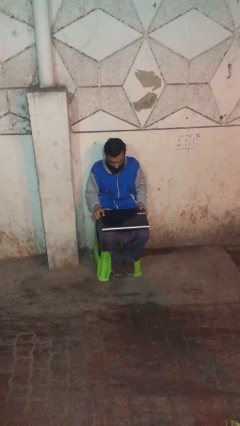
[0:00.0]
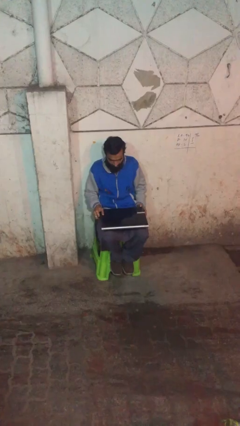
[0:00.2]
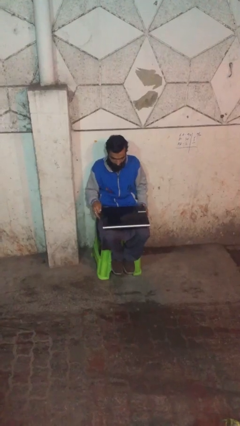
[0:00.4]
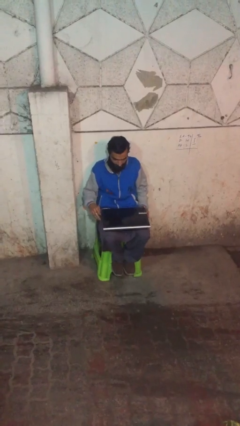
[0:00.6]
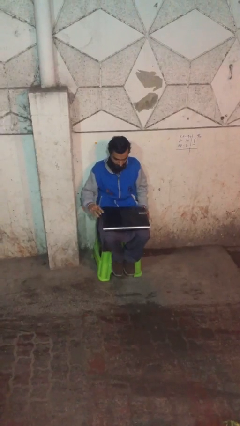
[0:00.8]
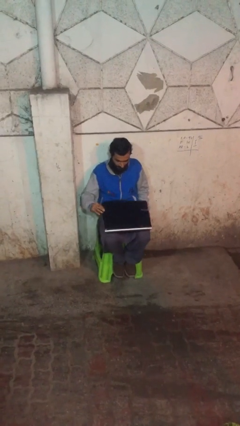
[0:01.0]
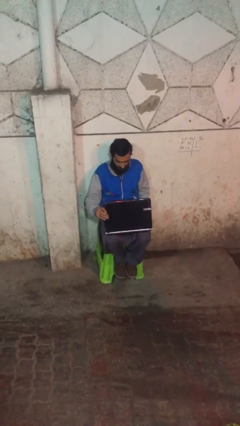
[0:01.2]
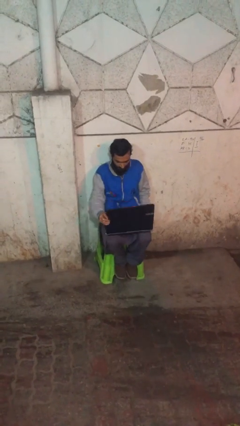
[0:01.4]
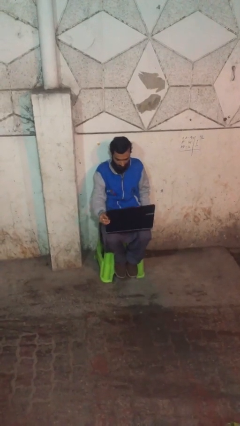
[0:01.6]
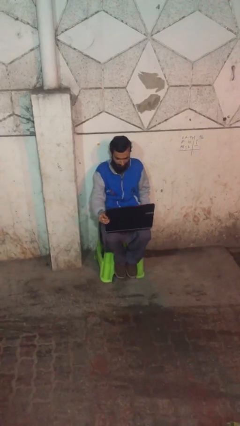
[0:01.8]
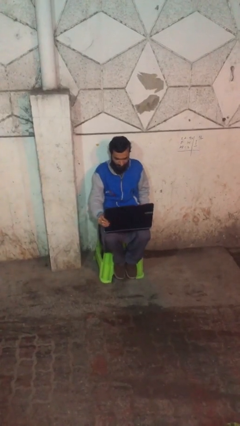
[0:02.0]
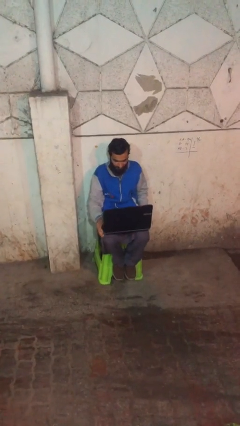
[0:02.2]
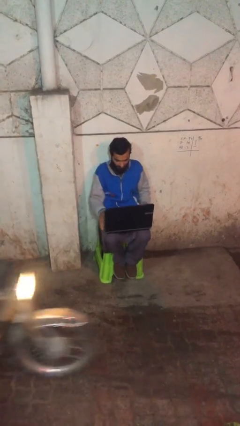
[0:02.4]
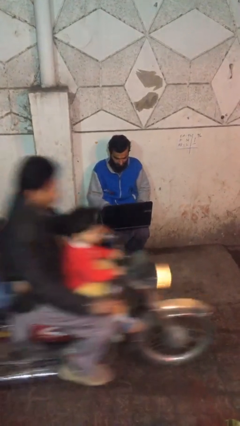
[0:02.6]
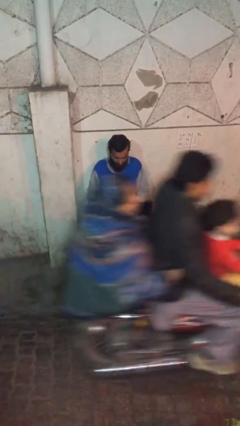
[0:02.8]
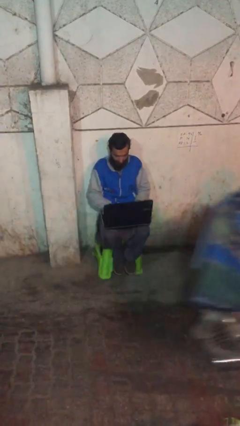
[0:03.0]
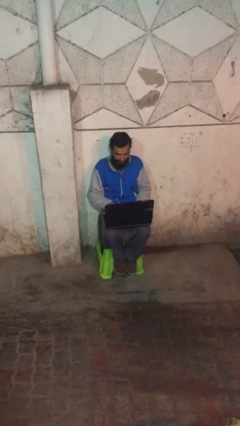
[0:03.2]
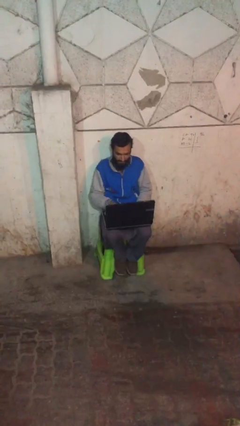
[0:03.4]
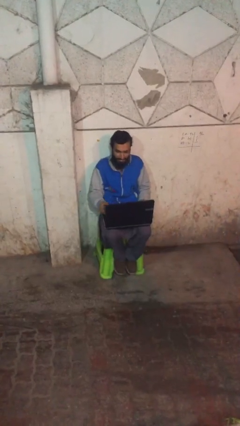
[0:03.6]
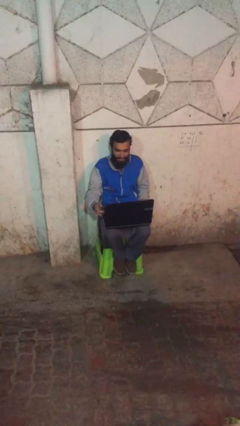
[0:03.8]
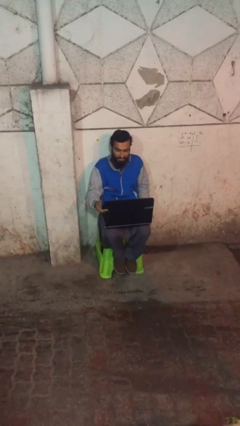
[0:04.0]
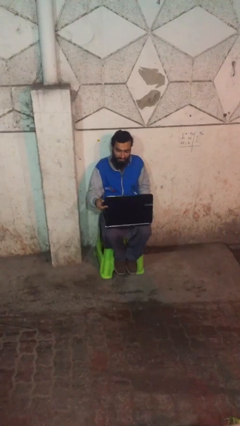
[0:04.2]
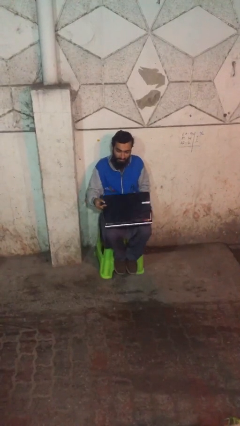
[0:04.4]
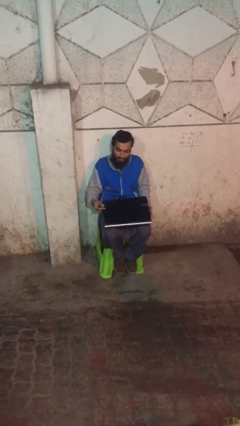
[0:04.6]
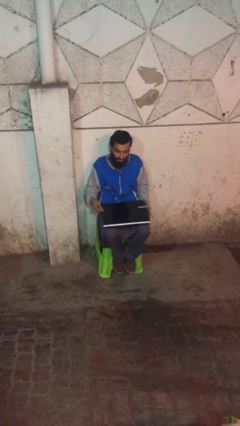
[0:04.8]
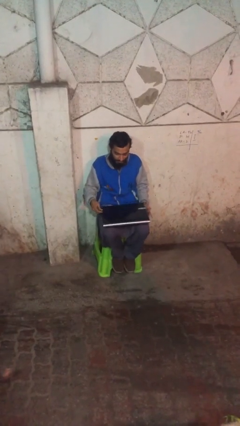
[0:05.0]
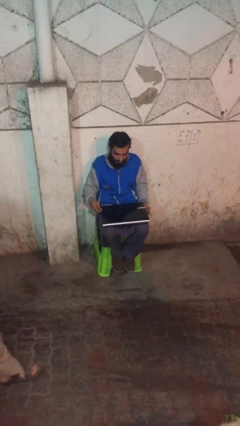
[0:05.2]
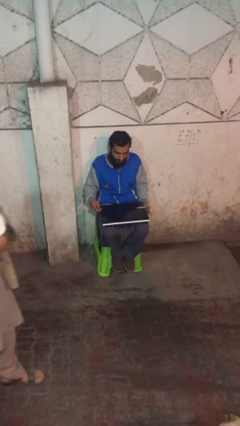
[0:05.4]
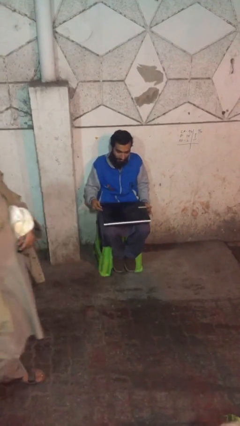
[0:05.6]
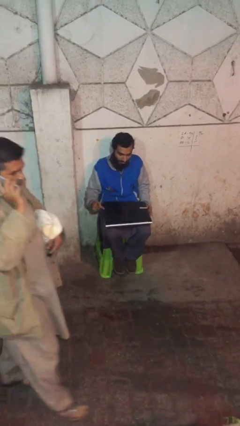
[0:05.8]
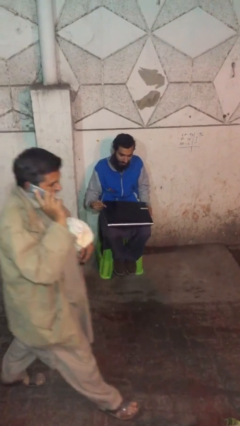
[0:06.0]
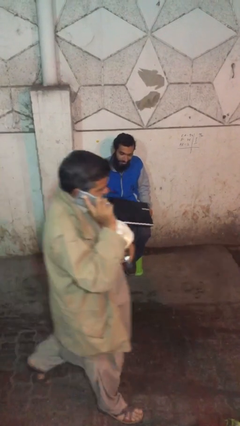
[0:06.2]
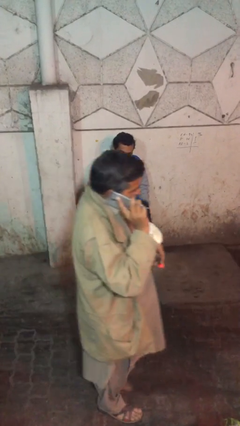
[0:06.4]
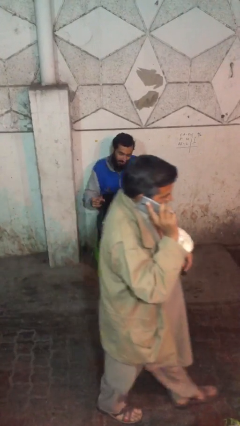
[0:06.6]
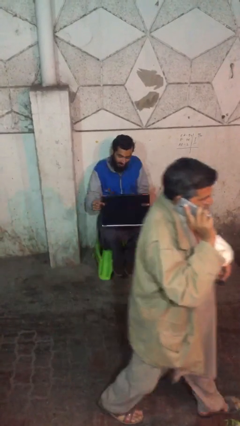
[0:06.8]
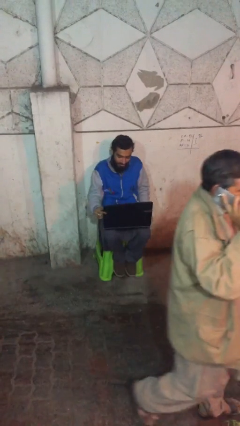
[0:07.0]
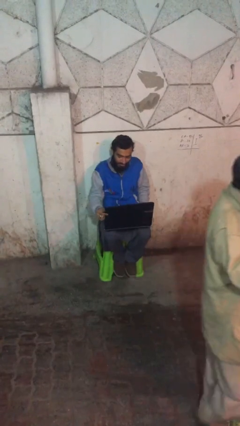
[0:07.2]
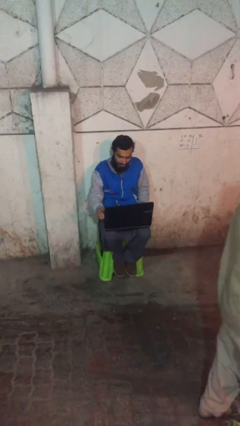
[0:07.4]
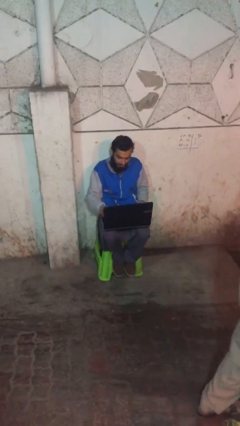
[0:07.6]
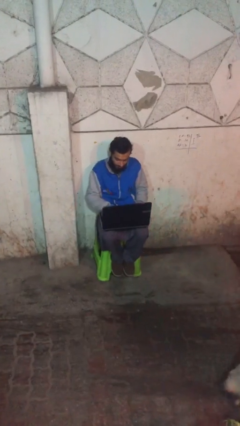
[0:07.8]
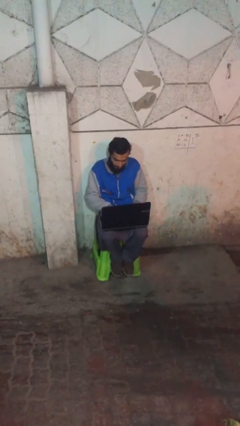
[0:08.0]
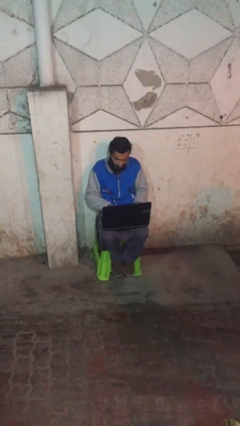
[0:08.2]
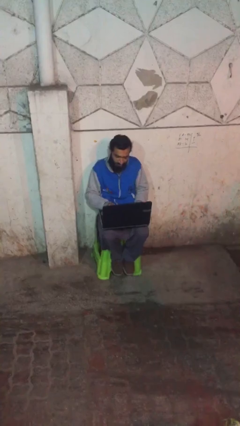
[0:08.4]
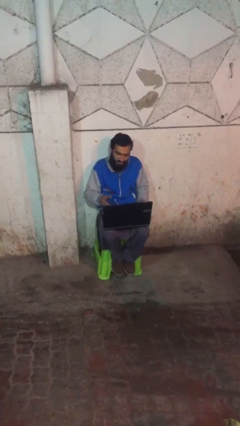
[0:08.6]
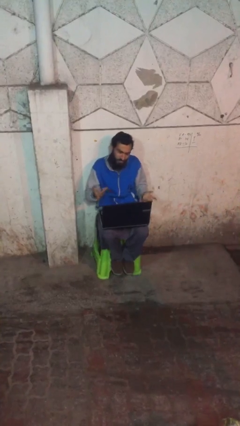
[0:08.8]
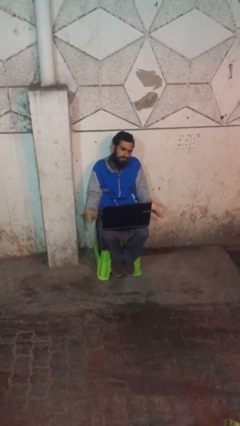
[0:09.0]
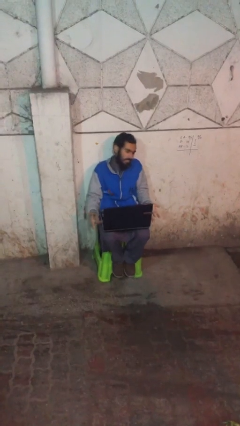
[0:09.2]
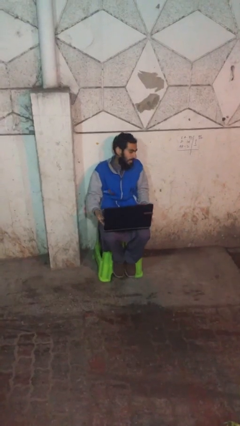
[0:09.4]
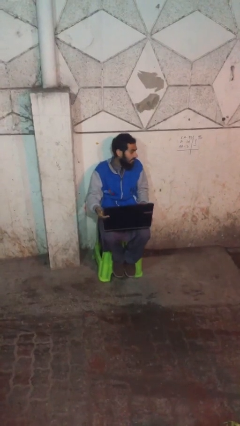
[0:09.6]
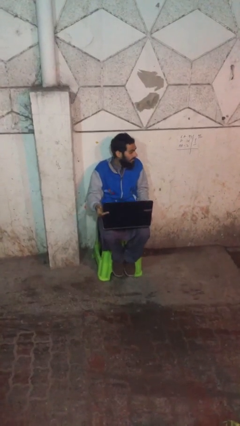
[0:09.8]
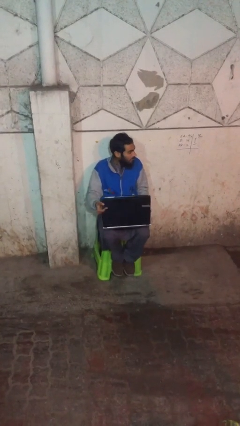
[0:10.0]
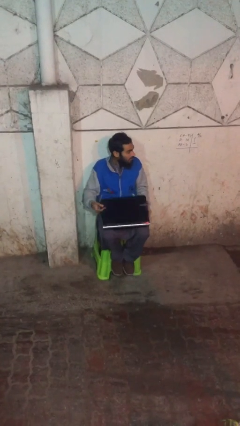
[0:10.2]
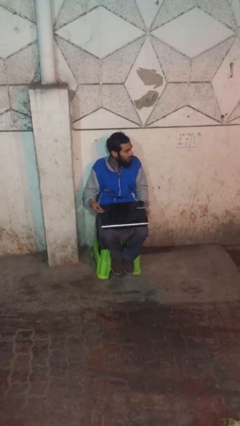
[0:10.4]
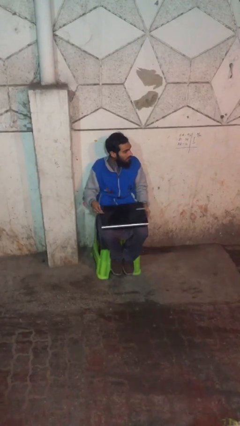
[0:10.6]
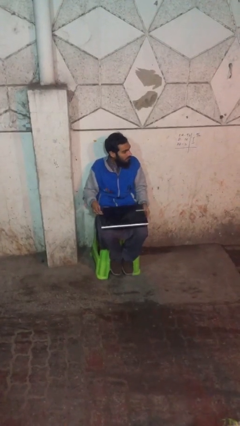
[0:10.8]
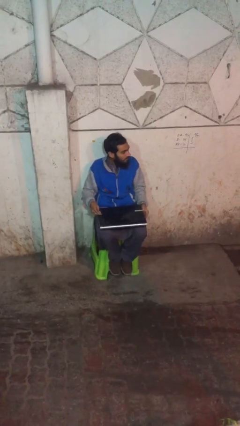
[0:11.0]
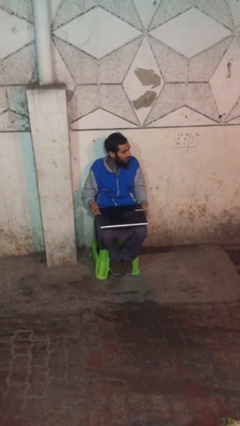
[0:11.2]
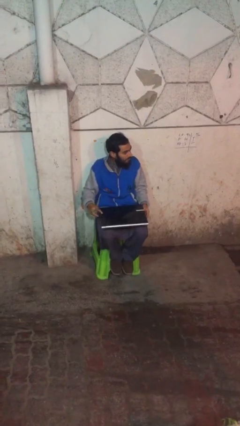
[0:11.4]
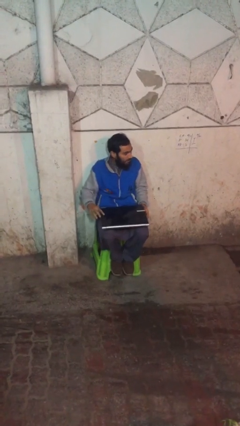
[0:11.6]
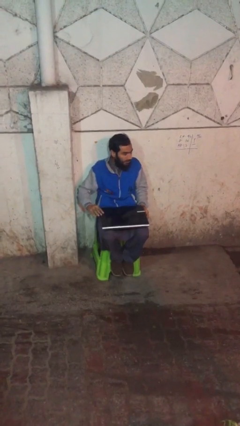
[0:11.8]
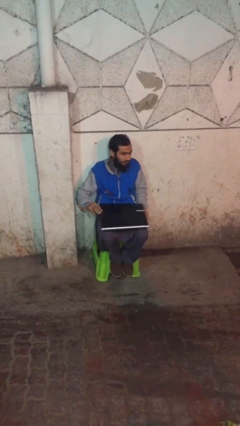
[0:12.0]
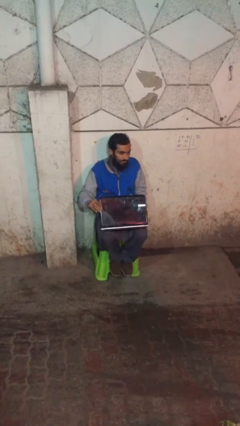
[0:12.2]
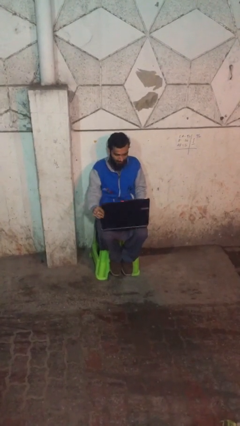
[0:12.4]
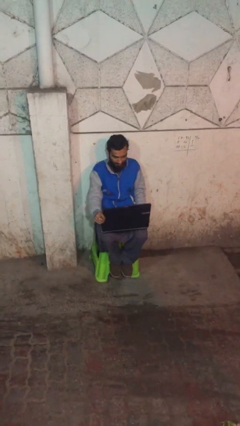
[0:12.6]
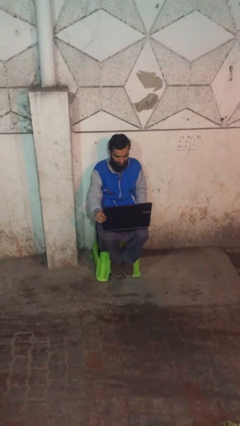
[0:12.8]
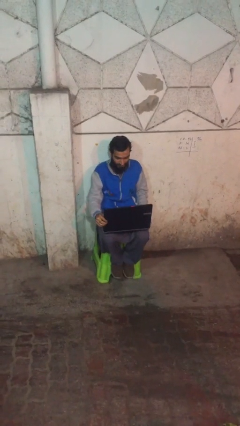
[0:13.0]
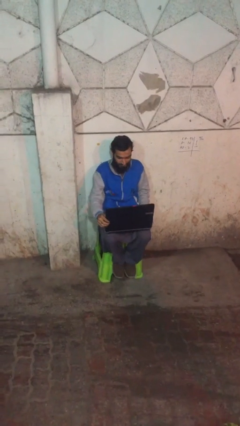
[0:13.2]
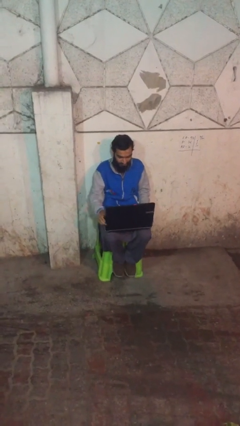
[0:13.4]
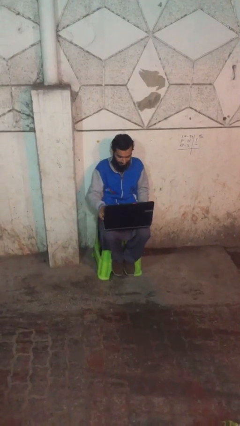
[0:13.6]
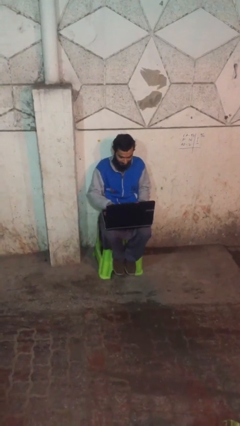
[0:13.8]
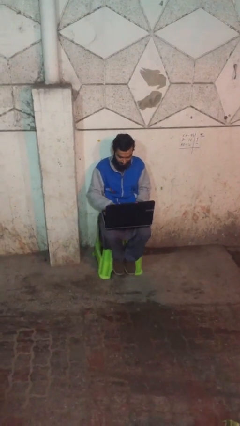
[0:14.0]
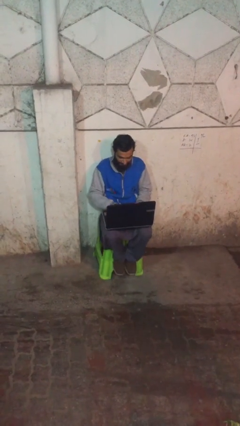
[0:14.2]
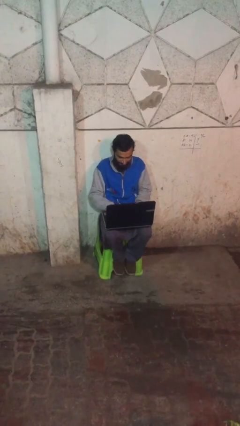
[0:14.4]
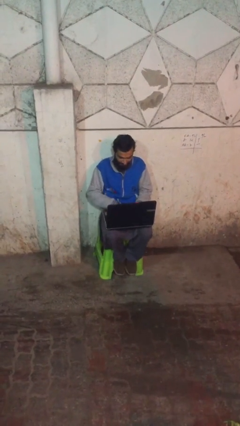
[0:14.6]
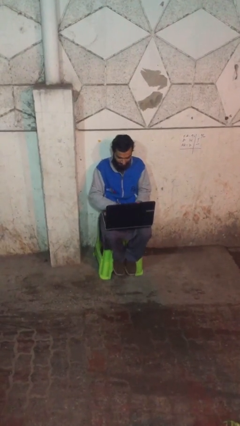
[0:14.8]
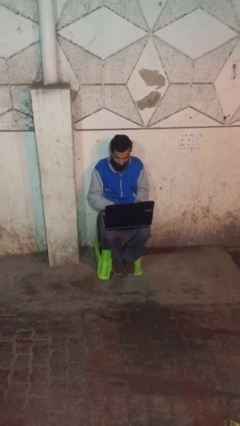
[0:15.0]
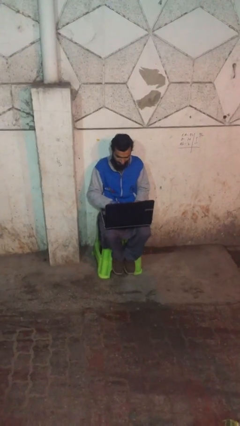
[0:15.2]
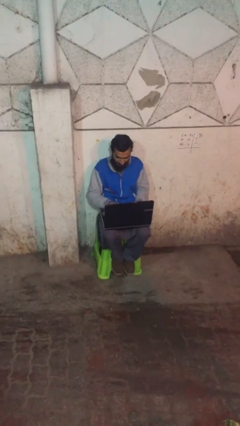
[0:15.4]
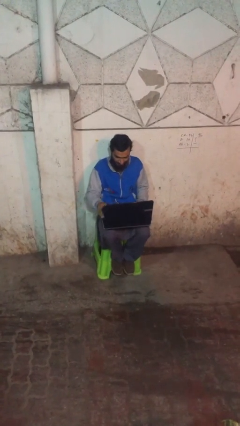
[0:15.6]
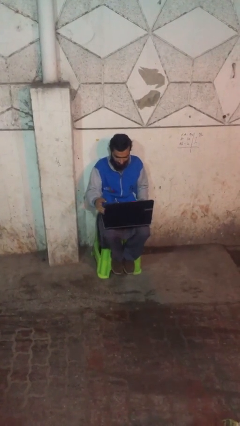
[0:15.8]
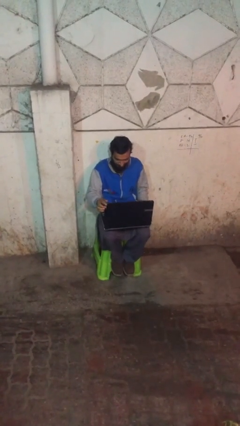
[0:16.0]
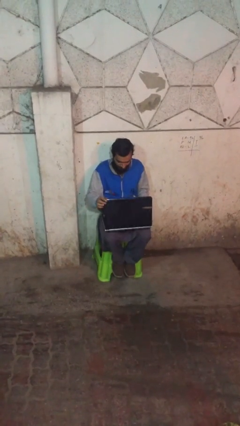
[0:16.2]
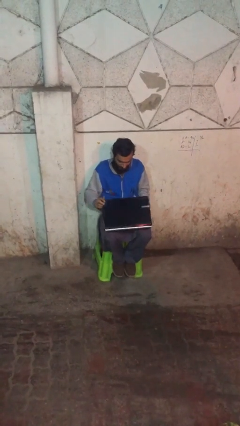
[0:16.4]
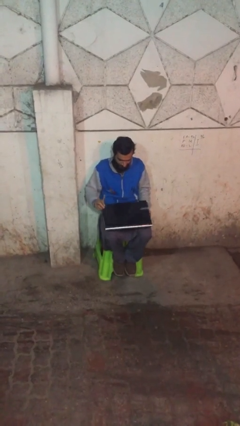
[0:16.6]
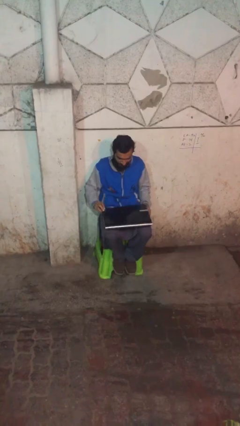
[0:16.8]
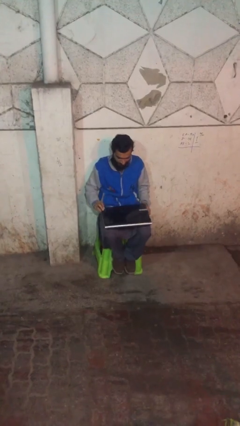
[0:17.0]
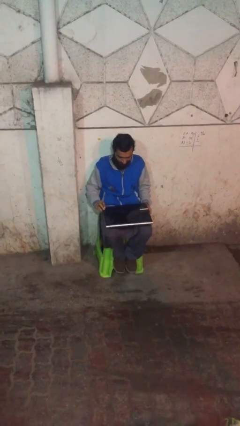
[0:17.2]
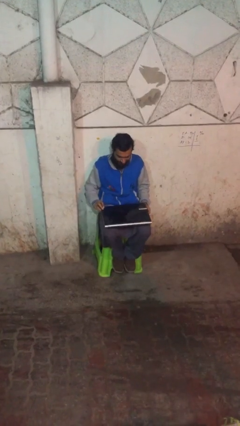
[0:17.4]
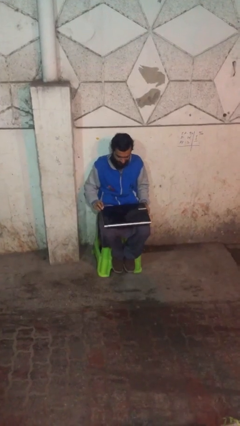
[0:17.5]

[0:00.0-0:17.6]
person interacts with laptop

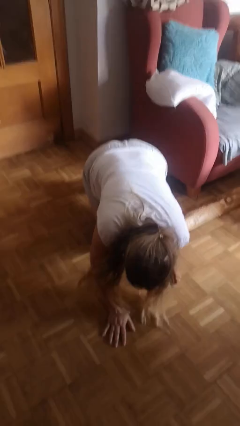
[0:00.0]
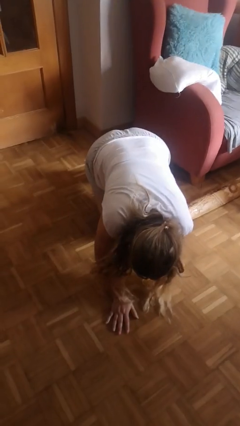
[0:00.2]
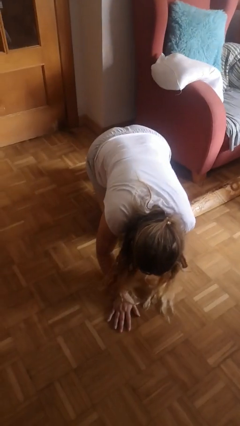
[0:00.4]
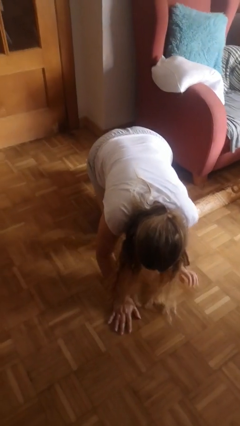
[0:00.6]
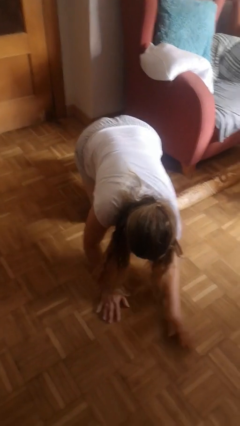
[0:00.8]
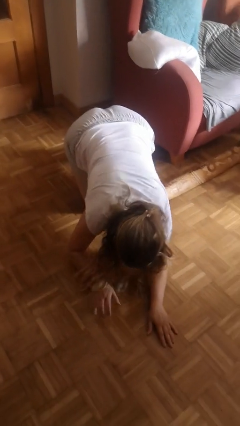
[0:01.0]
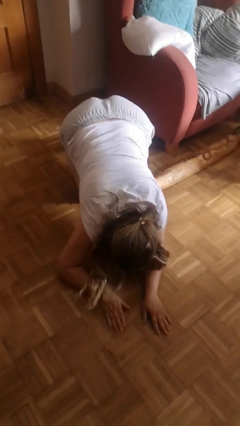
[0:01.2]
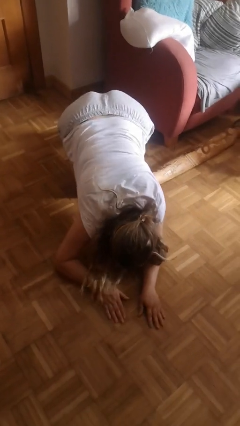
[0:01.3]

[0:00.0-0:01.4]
person lies down on floor
